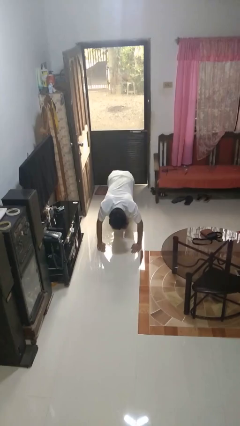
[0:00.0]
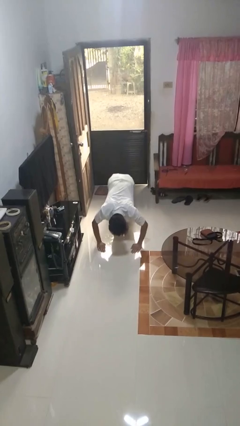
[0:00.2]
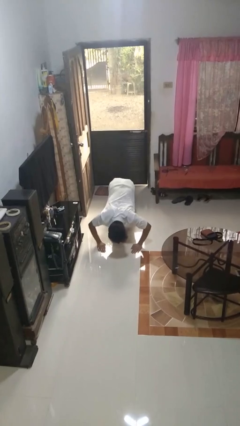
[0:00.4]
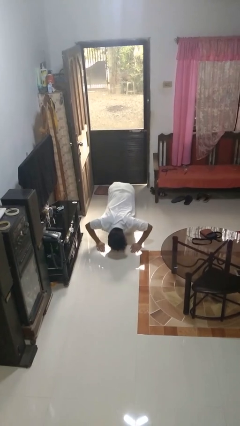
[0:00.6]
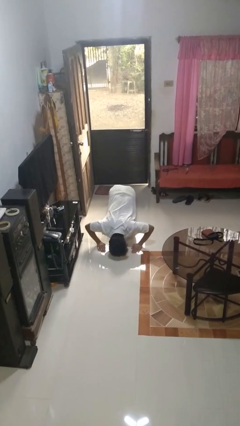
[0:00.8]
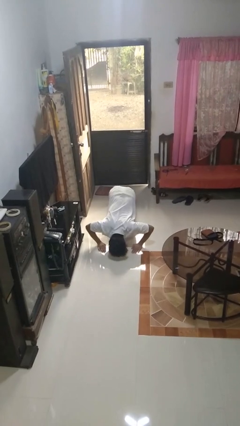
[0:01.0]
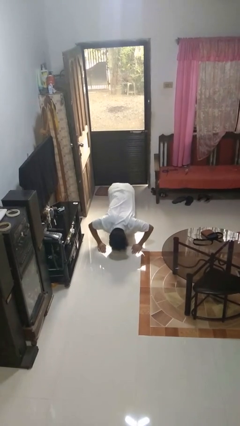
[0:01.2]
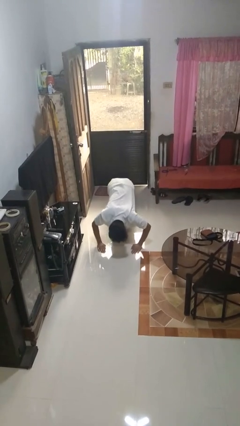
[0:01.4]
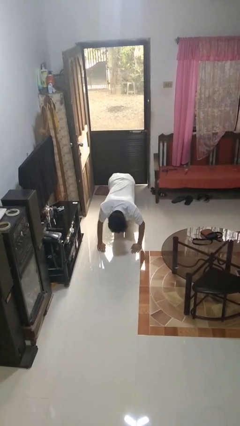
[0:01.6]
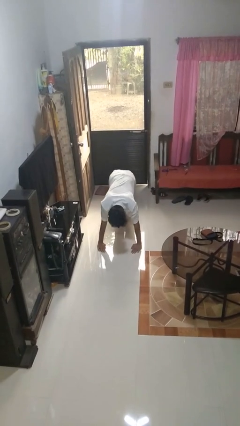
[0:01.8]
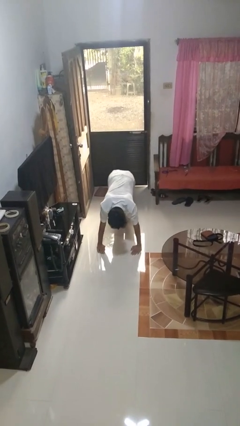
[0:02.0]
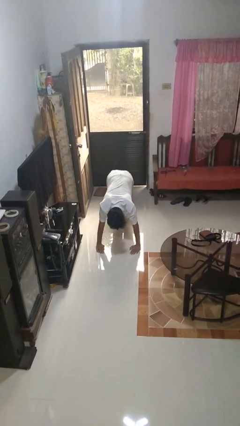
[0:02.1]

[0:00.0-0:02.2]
person exercises with pushup

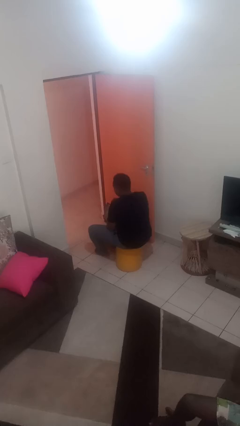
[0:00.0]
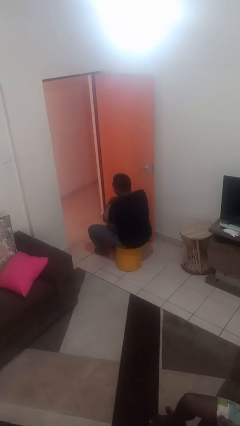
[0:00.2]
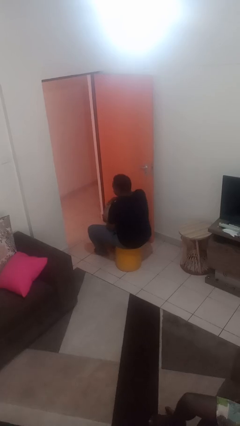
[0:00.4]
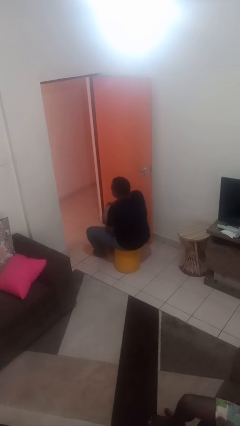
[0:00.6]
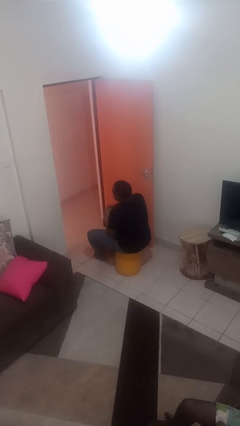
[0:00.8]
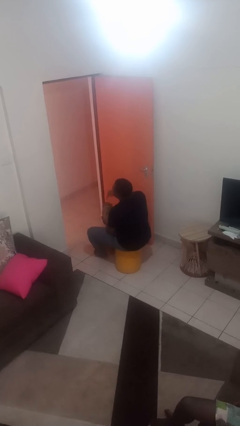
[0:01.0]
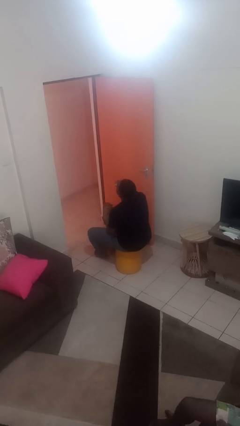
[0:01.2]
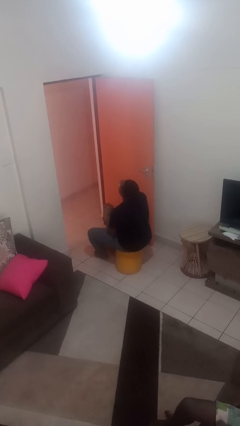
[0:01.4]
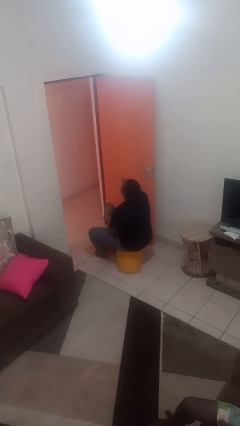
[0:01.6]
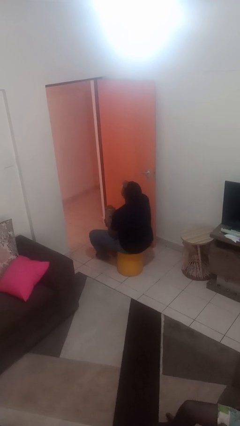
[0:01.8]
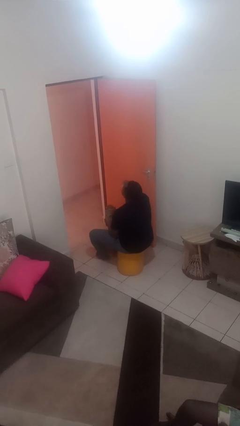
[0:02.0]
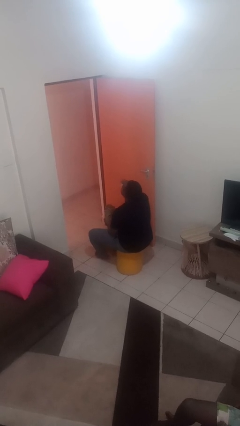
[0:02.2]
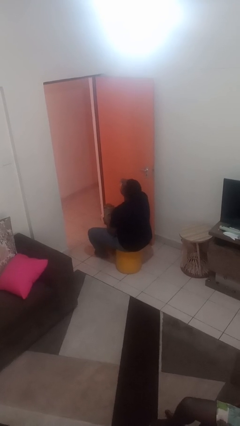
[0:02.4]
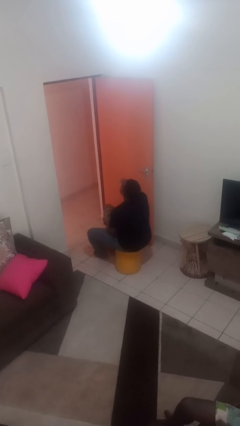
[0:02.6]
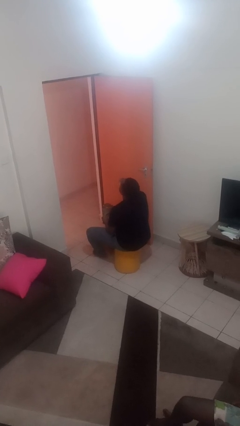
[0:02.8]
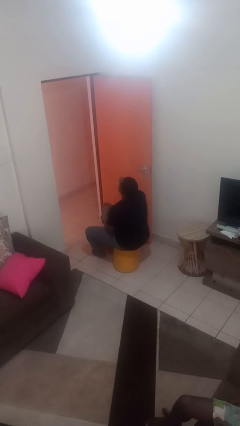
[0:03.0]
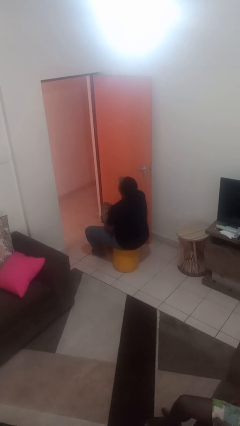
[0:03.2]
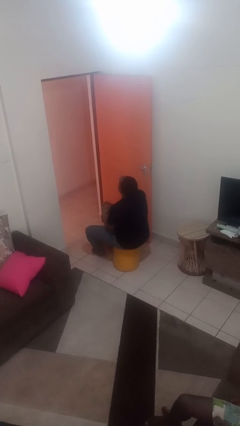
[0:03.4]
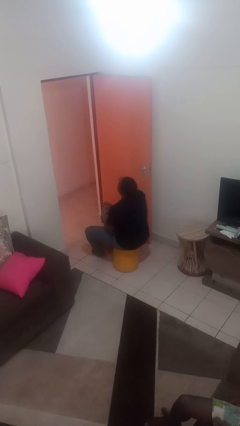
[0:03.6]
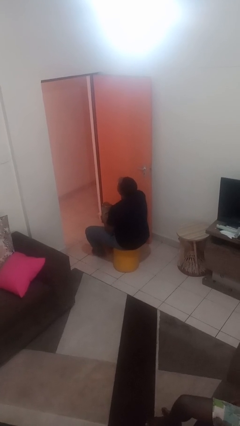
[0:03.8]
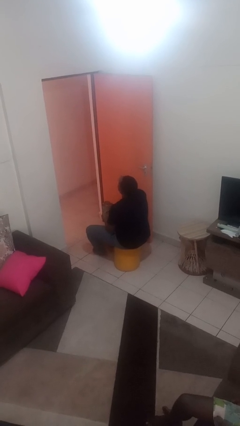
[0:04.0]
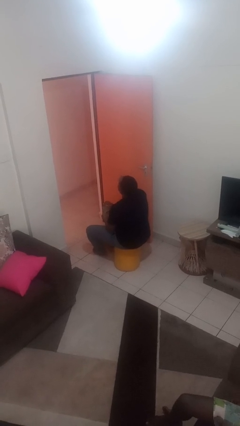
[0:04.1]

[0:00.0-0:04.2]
person eats snack from bag

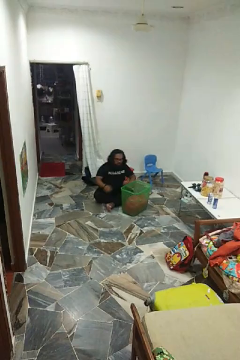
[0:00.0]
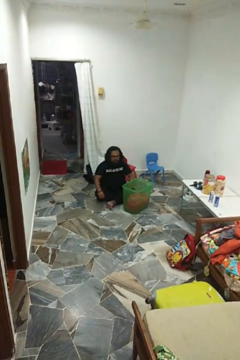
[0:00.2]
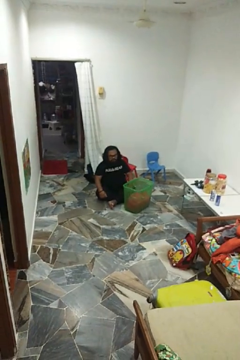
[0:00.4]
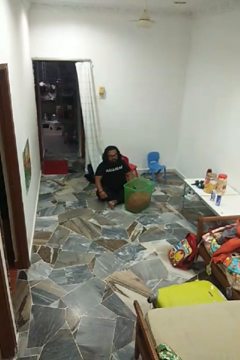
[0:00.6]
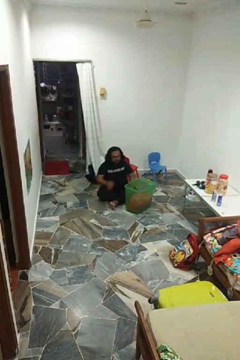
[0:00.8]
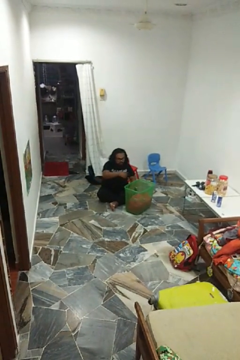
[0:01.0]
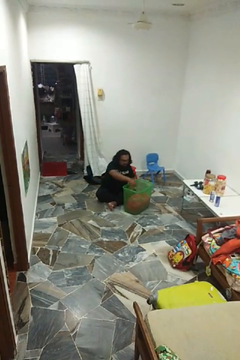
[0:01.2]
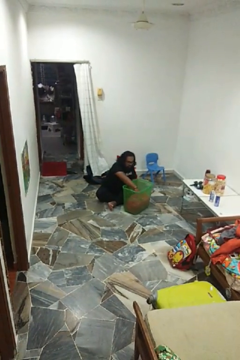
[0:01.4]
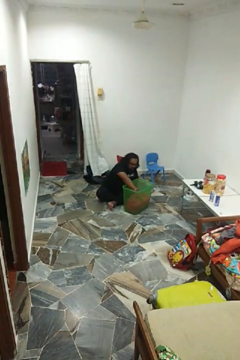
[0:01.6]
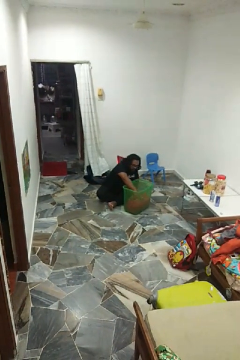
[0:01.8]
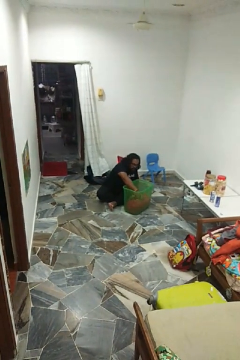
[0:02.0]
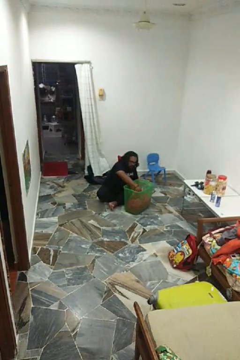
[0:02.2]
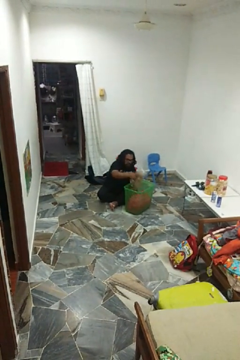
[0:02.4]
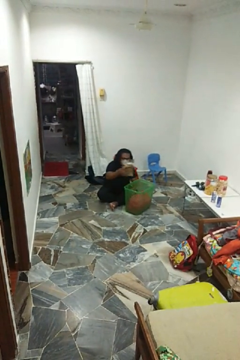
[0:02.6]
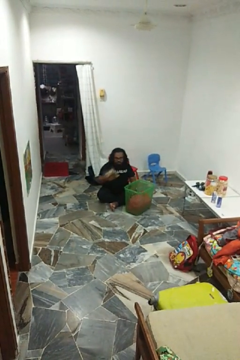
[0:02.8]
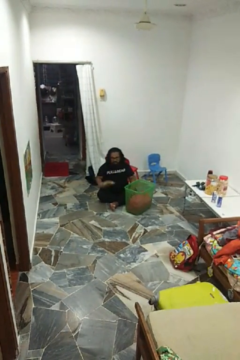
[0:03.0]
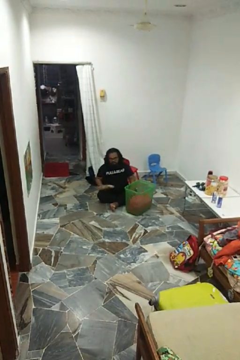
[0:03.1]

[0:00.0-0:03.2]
person takes object from basket

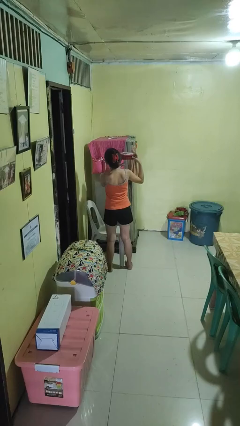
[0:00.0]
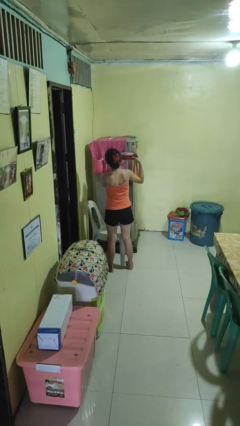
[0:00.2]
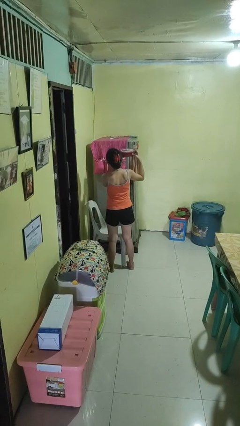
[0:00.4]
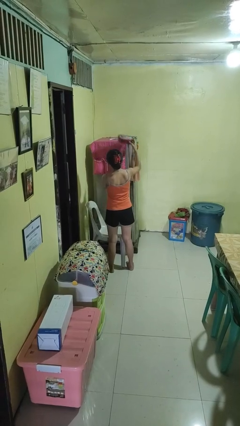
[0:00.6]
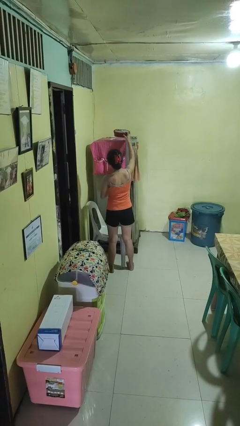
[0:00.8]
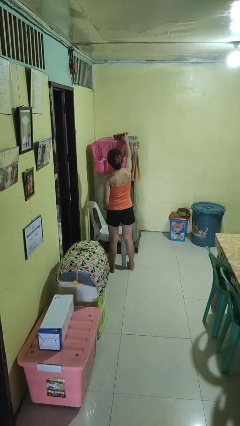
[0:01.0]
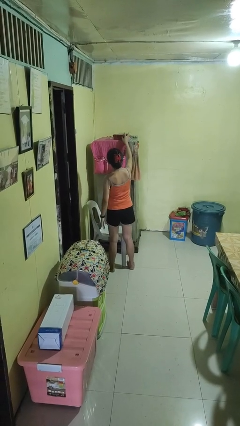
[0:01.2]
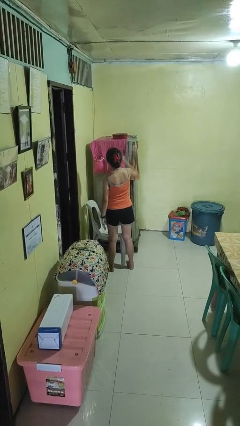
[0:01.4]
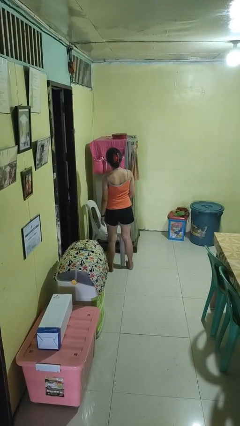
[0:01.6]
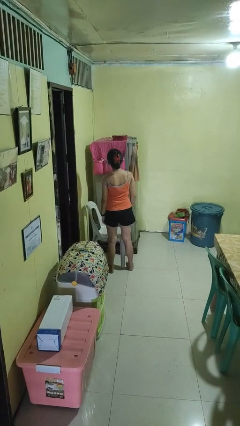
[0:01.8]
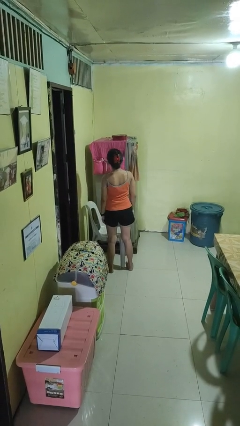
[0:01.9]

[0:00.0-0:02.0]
person puts down object on shelf

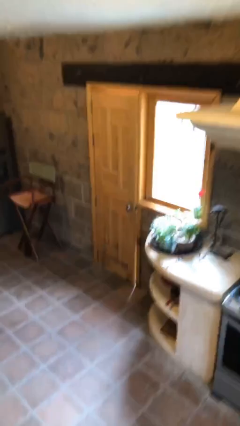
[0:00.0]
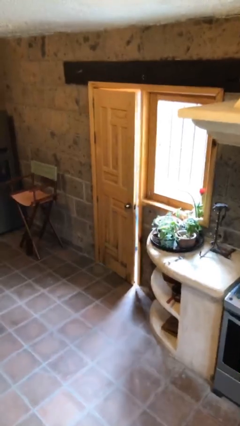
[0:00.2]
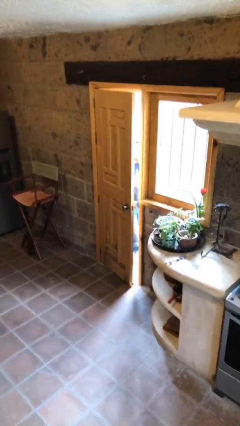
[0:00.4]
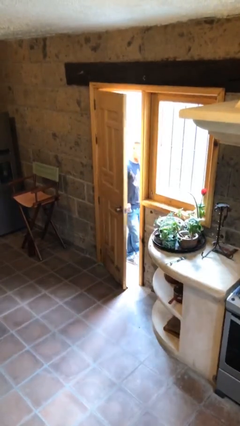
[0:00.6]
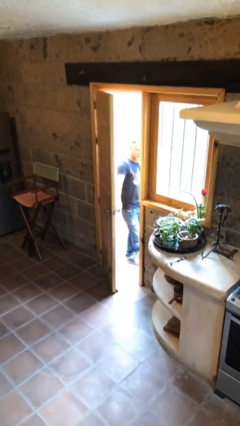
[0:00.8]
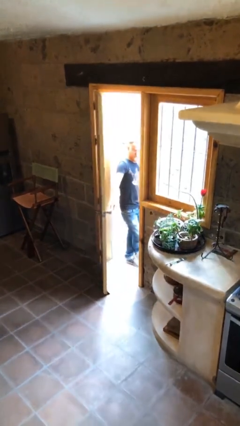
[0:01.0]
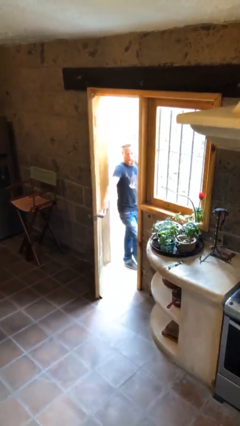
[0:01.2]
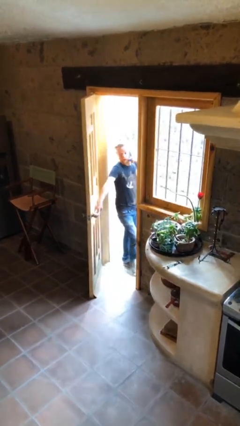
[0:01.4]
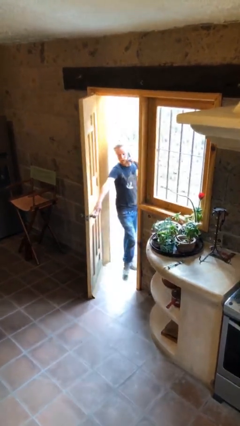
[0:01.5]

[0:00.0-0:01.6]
person opens facility door

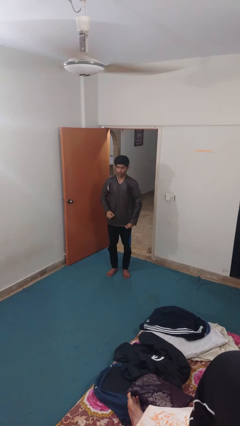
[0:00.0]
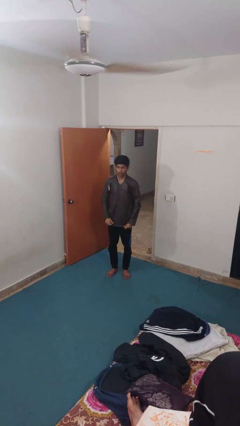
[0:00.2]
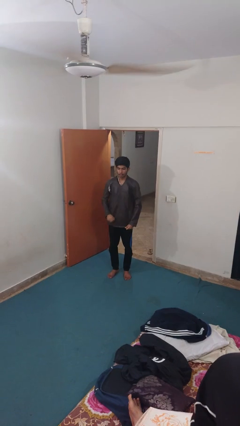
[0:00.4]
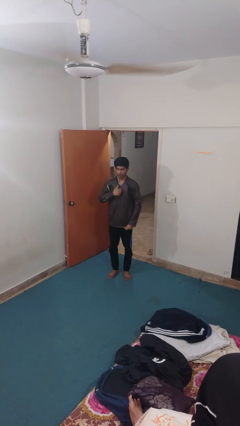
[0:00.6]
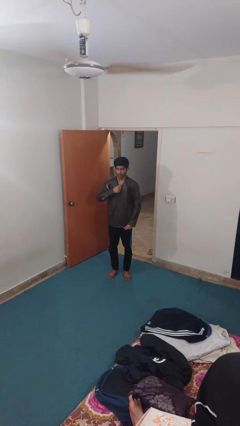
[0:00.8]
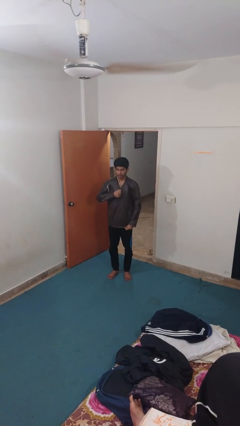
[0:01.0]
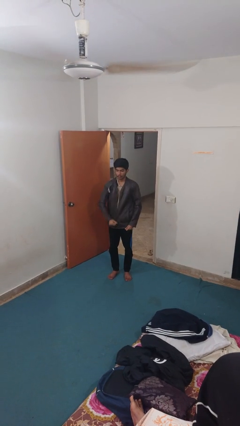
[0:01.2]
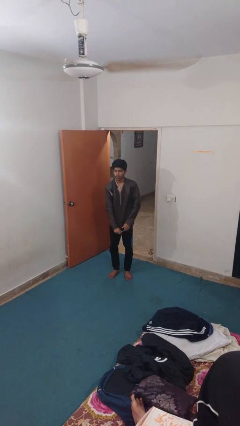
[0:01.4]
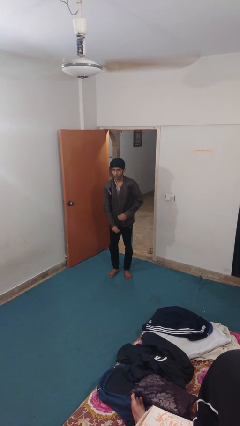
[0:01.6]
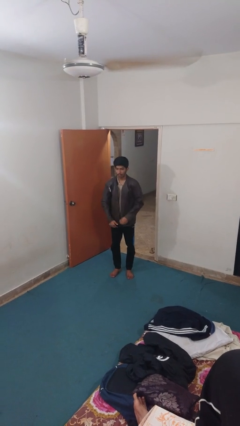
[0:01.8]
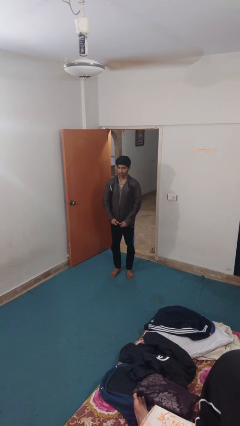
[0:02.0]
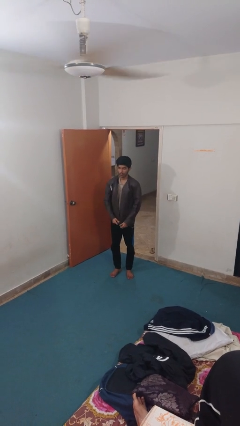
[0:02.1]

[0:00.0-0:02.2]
person unzips jacket

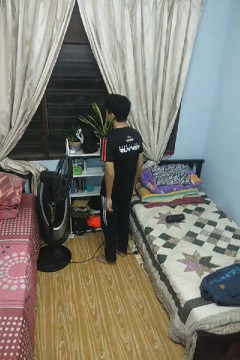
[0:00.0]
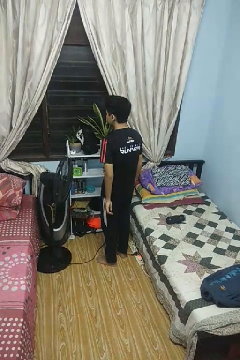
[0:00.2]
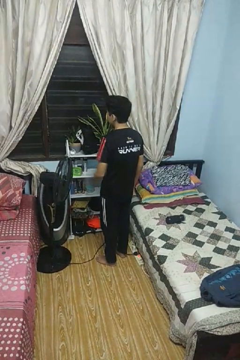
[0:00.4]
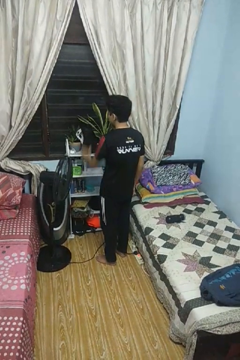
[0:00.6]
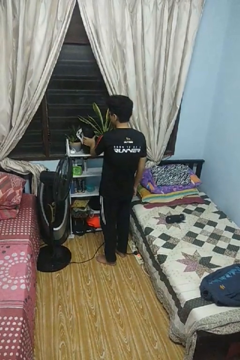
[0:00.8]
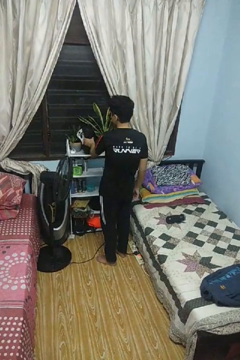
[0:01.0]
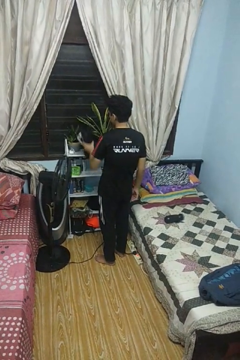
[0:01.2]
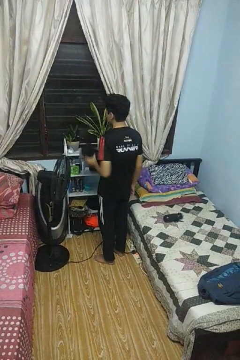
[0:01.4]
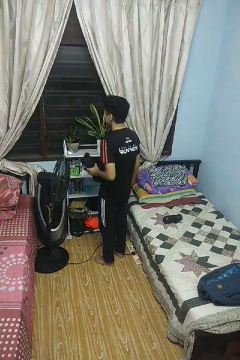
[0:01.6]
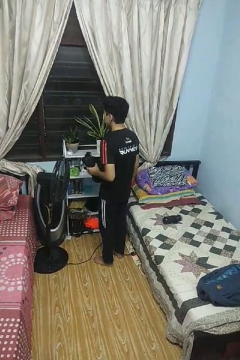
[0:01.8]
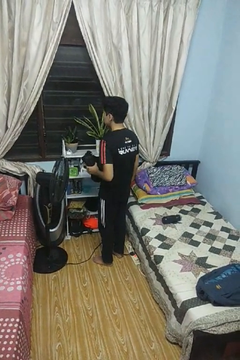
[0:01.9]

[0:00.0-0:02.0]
person picks up object from countertop
